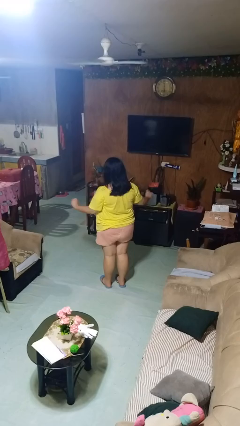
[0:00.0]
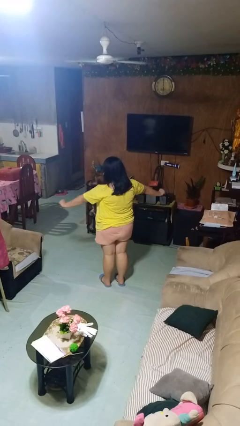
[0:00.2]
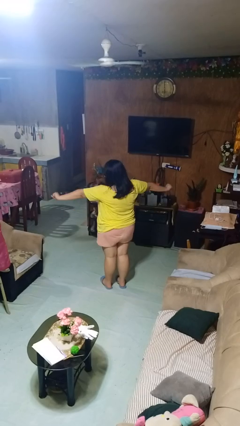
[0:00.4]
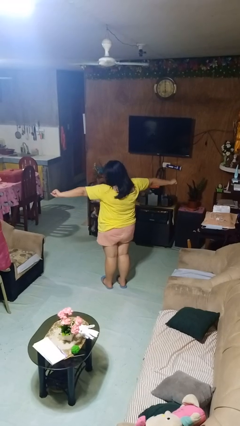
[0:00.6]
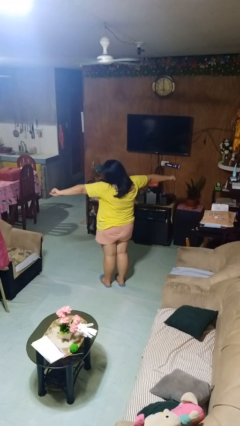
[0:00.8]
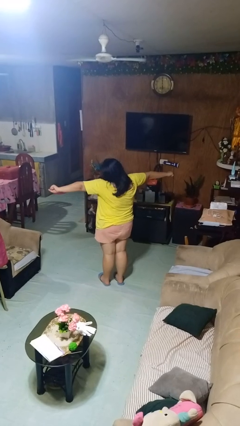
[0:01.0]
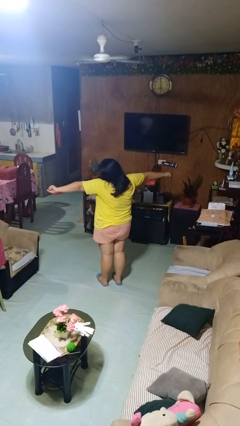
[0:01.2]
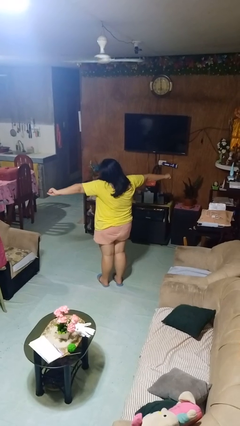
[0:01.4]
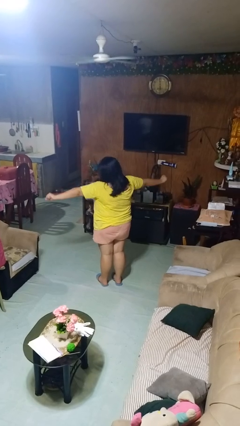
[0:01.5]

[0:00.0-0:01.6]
person stretches arms to side

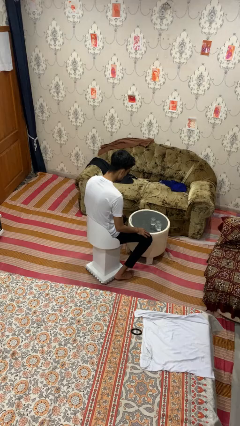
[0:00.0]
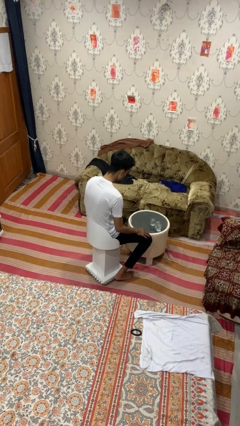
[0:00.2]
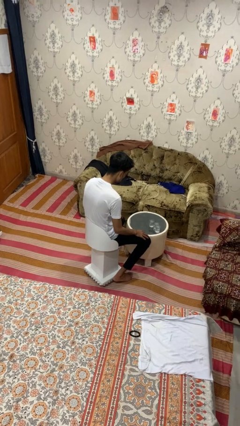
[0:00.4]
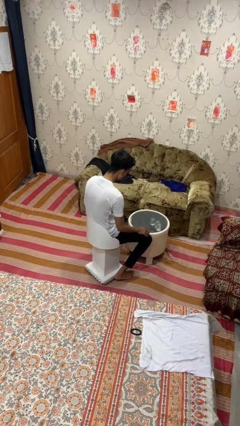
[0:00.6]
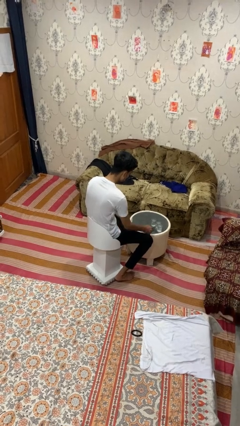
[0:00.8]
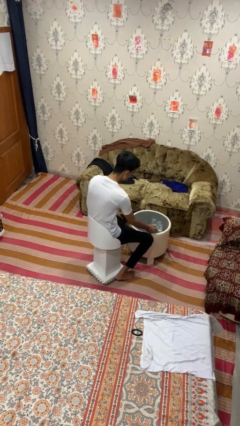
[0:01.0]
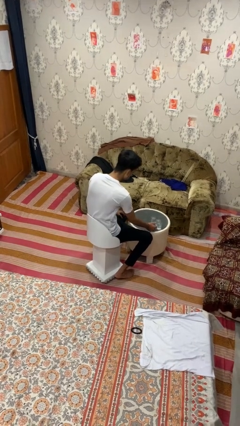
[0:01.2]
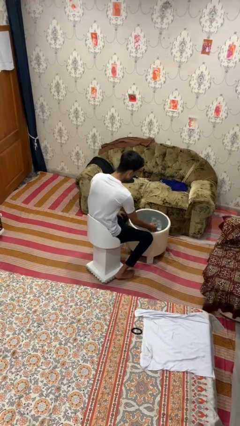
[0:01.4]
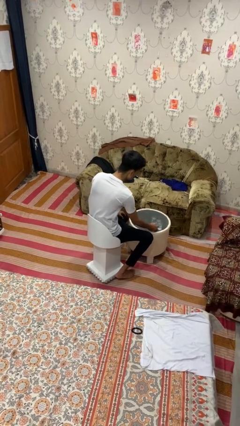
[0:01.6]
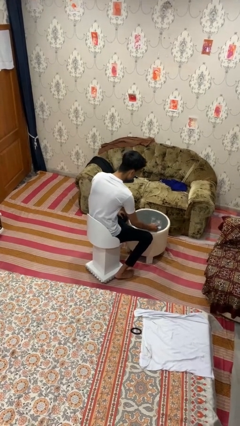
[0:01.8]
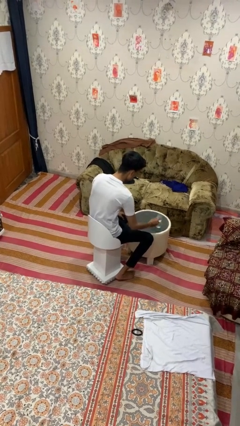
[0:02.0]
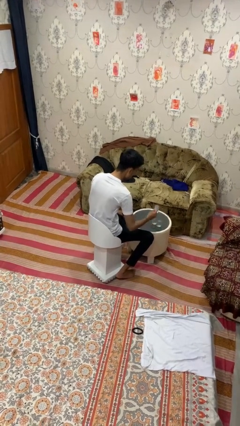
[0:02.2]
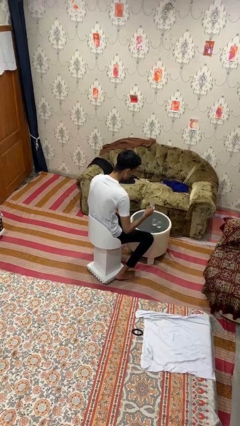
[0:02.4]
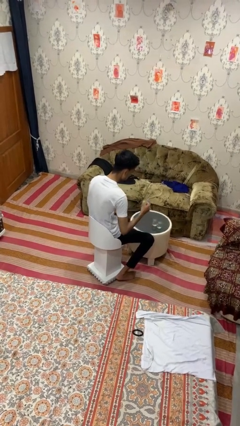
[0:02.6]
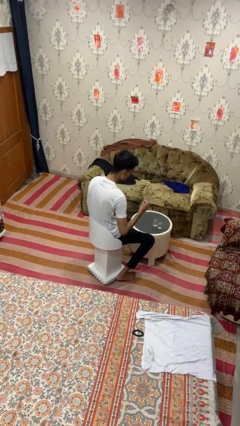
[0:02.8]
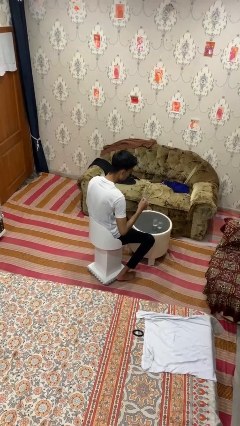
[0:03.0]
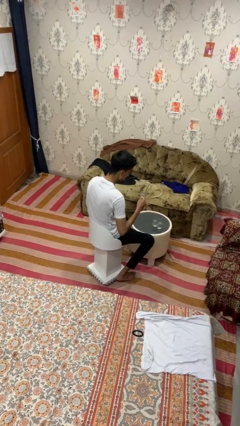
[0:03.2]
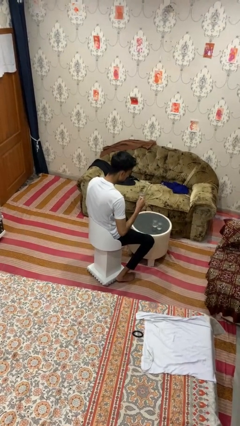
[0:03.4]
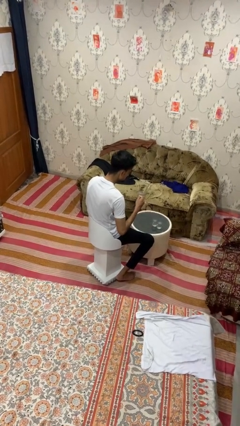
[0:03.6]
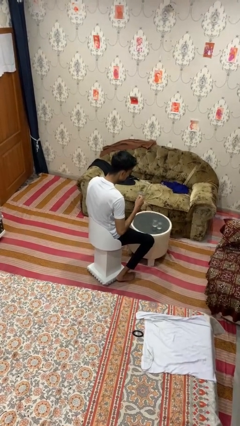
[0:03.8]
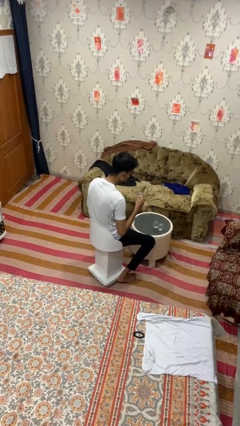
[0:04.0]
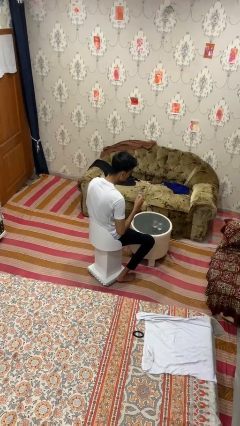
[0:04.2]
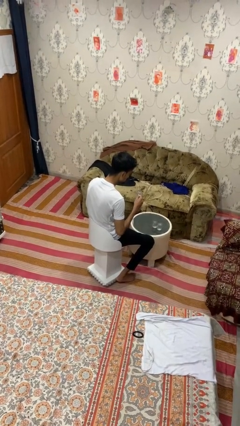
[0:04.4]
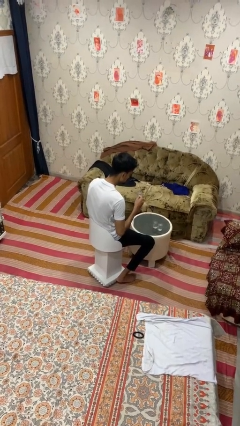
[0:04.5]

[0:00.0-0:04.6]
person picks up object from table

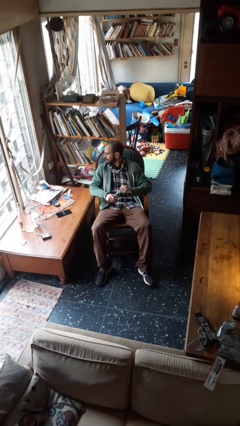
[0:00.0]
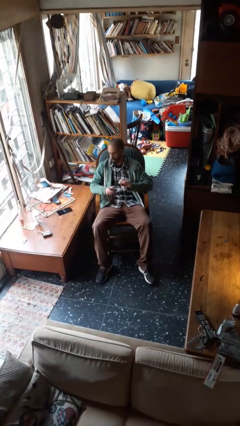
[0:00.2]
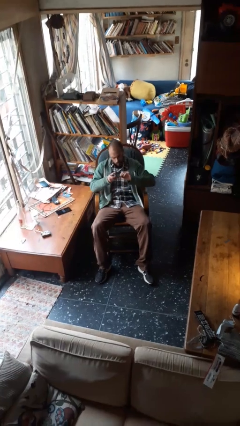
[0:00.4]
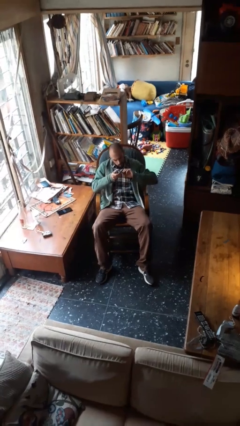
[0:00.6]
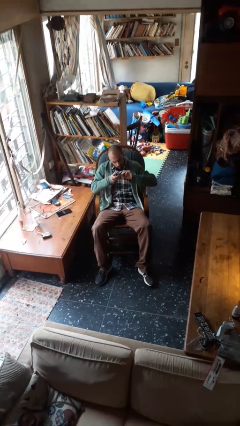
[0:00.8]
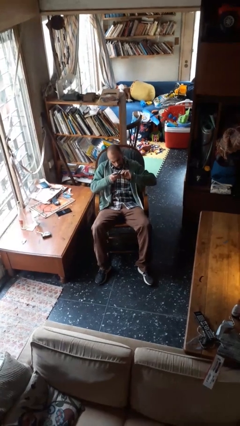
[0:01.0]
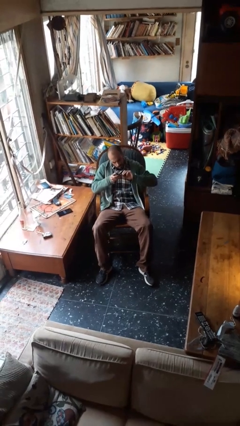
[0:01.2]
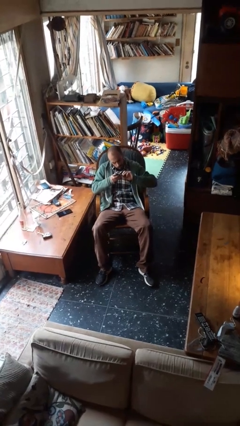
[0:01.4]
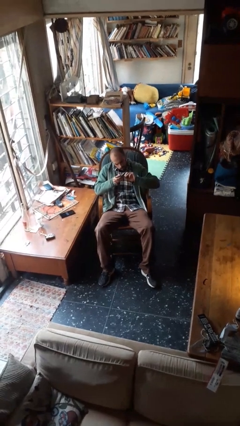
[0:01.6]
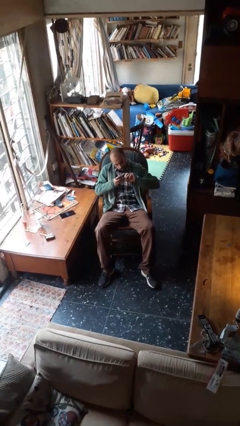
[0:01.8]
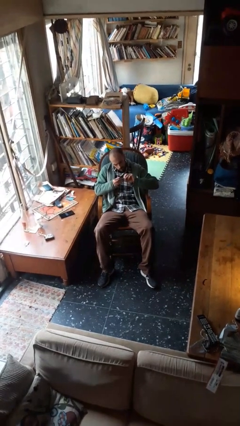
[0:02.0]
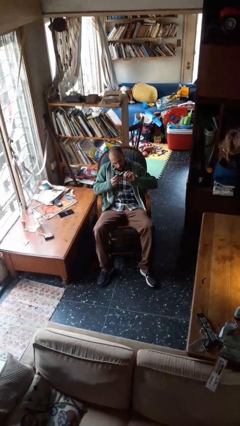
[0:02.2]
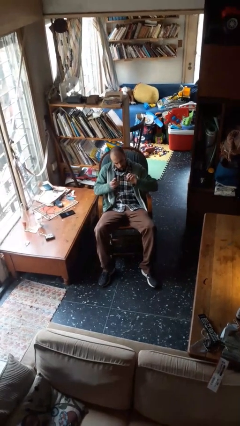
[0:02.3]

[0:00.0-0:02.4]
person clips fingernails

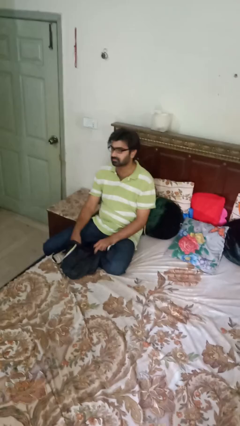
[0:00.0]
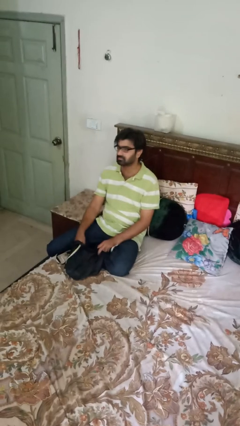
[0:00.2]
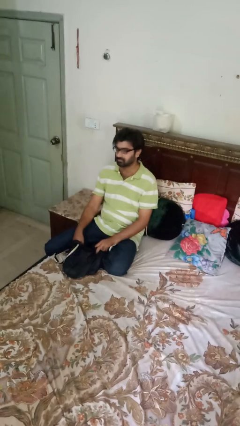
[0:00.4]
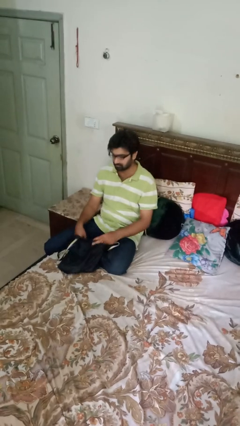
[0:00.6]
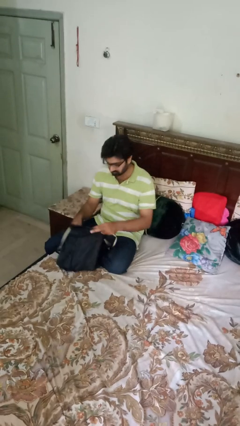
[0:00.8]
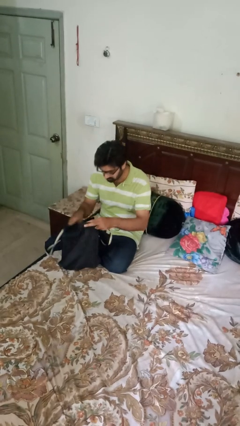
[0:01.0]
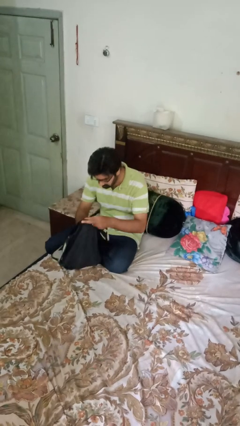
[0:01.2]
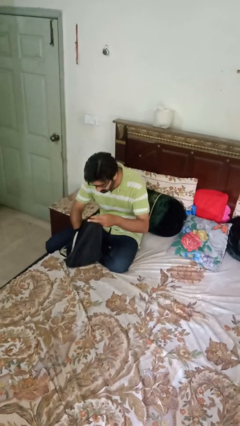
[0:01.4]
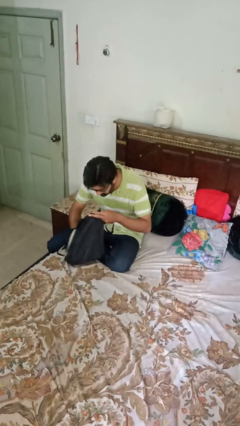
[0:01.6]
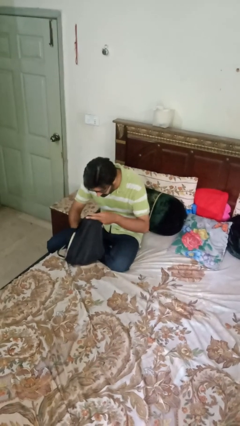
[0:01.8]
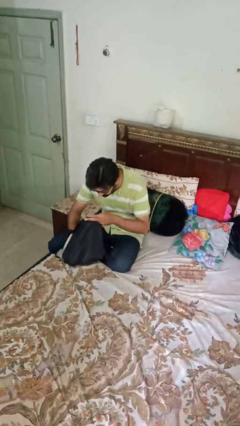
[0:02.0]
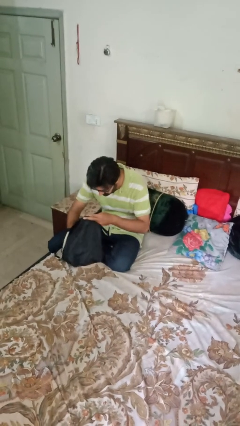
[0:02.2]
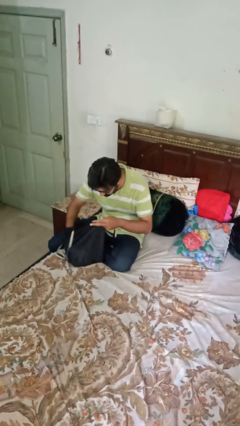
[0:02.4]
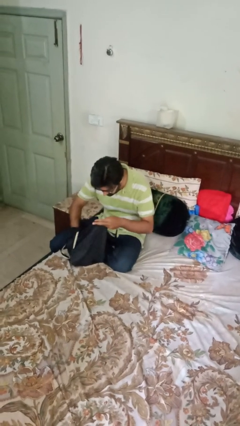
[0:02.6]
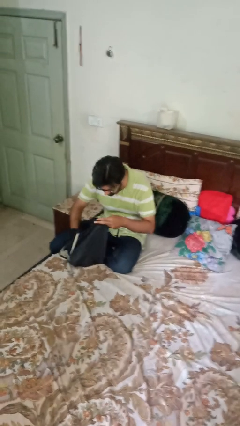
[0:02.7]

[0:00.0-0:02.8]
person searches in bag

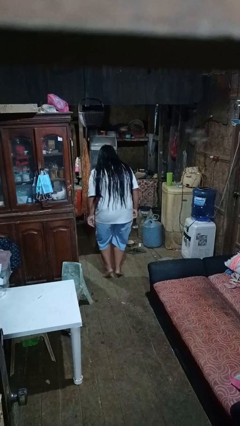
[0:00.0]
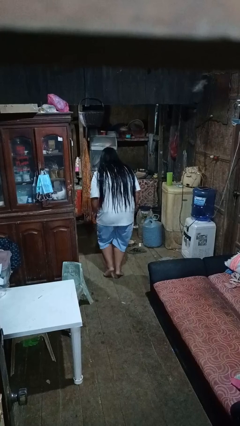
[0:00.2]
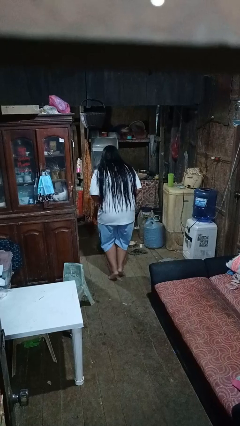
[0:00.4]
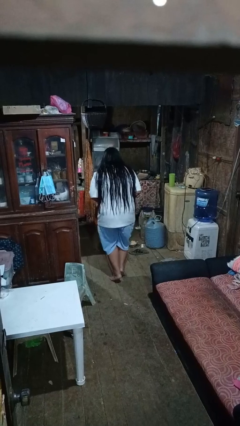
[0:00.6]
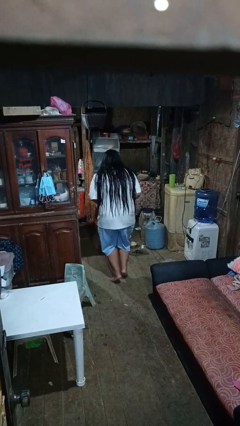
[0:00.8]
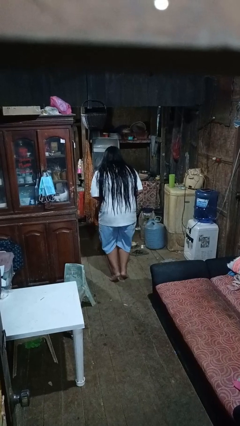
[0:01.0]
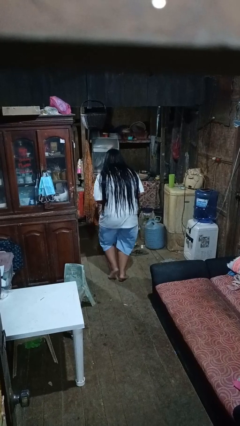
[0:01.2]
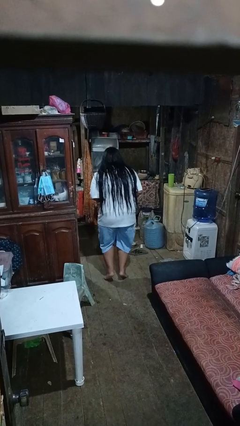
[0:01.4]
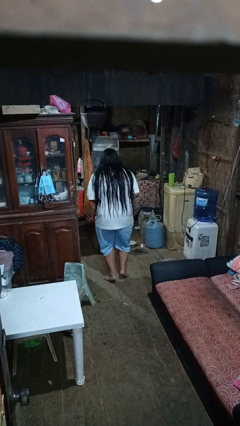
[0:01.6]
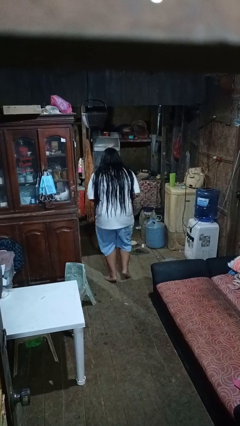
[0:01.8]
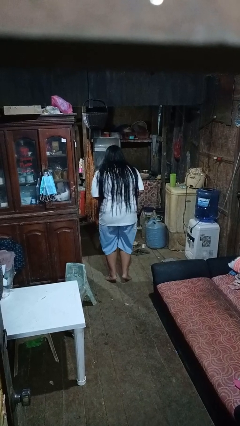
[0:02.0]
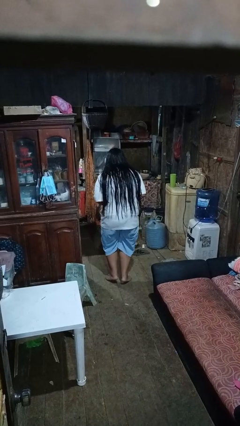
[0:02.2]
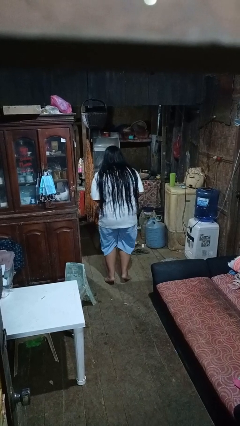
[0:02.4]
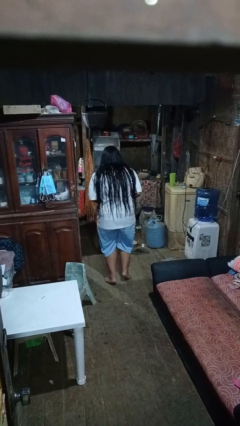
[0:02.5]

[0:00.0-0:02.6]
person walks tiptoe

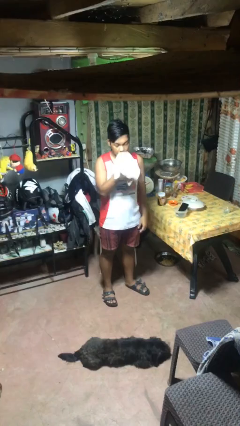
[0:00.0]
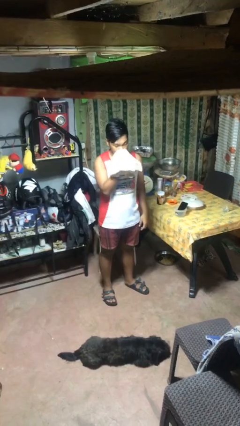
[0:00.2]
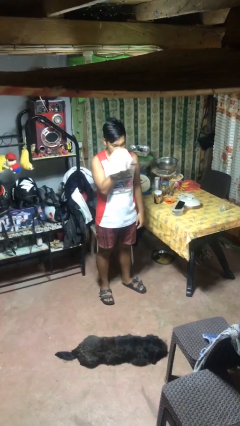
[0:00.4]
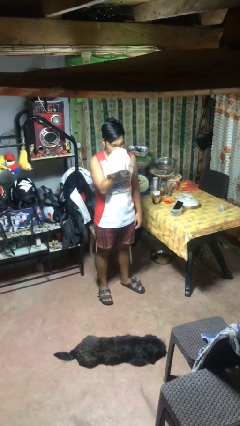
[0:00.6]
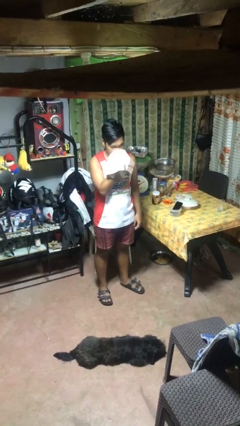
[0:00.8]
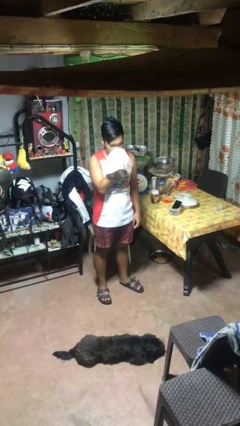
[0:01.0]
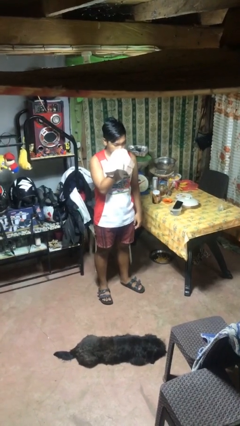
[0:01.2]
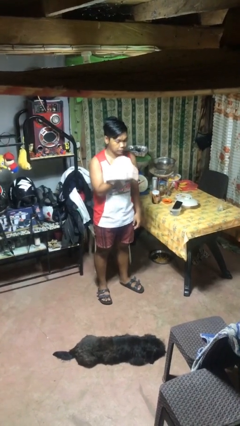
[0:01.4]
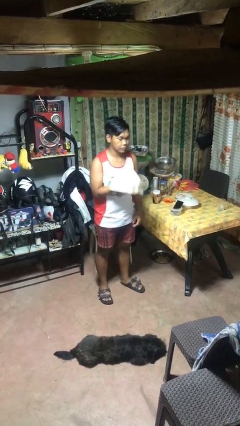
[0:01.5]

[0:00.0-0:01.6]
person blows nose

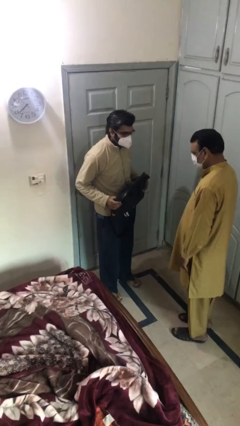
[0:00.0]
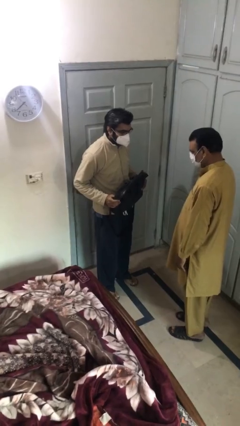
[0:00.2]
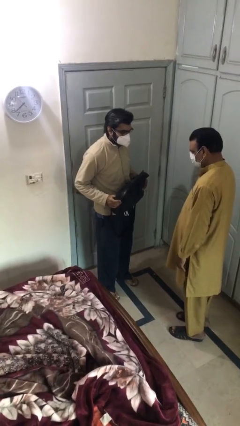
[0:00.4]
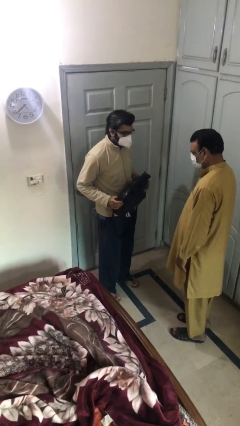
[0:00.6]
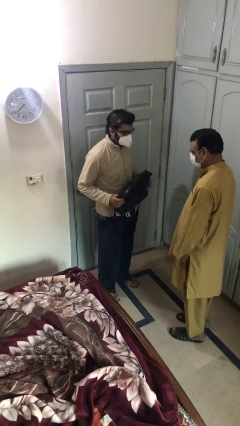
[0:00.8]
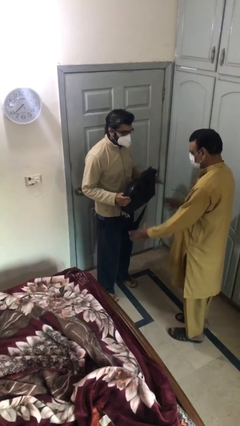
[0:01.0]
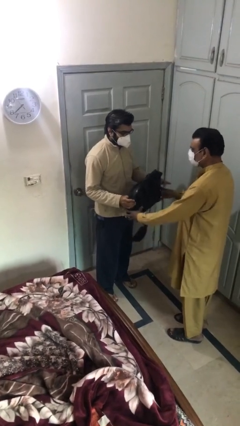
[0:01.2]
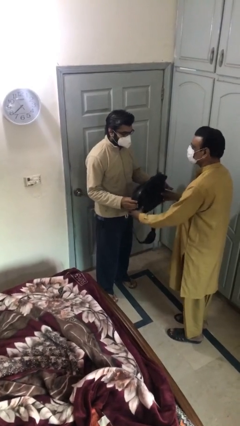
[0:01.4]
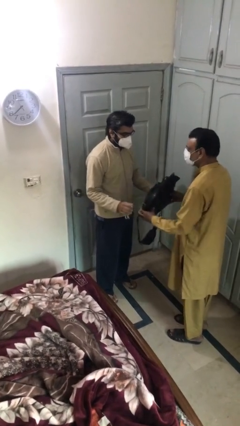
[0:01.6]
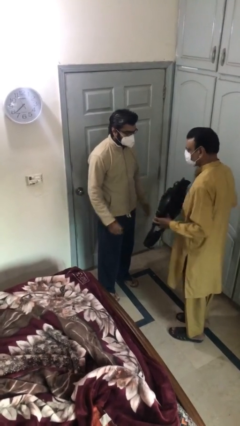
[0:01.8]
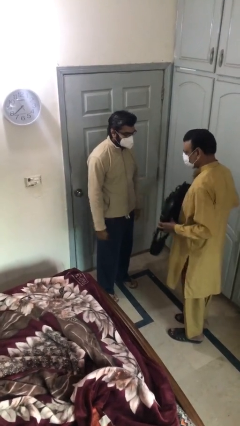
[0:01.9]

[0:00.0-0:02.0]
person transfers object to person
